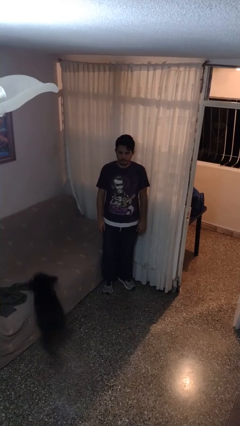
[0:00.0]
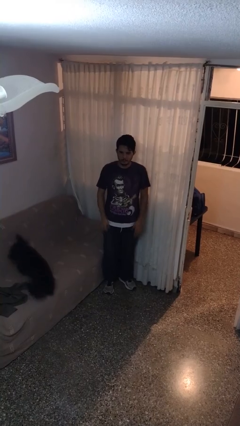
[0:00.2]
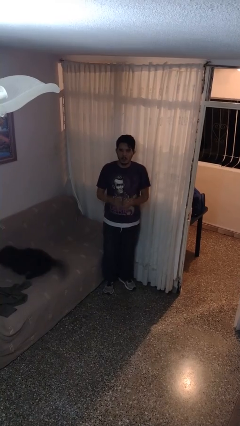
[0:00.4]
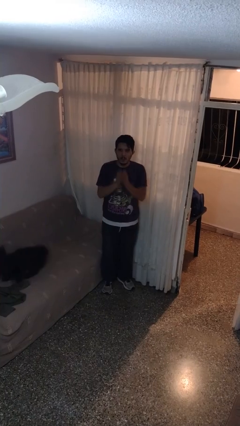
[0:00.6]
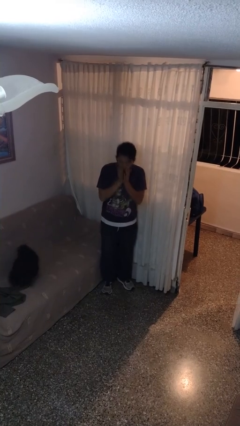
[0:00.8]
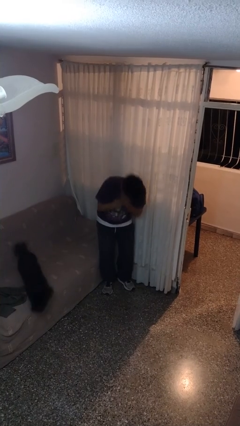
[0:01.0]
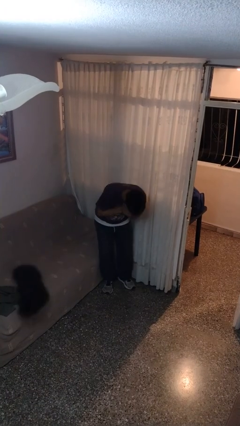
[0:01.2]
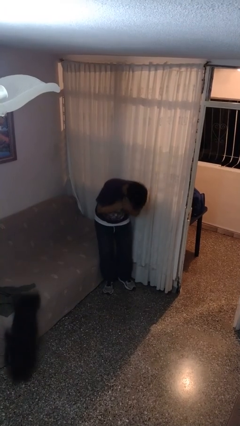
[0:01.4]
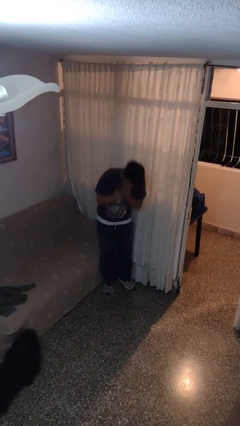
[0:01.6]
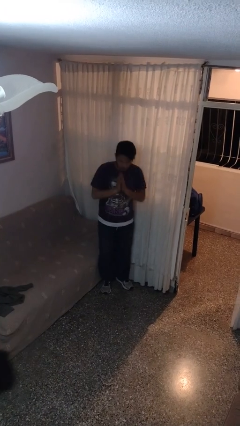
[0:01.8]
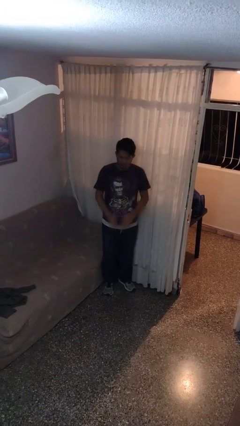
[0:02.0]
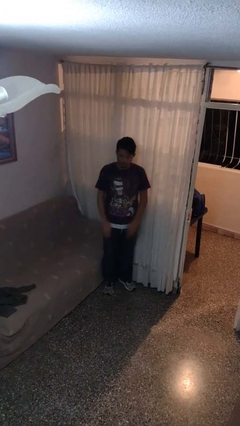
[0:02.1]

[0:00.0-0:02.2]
person sneezes into hand

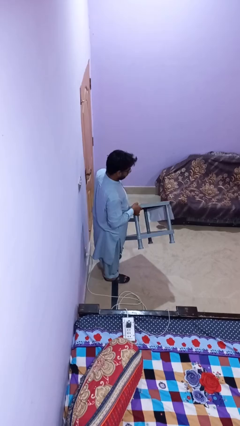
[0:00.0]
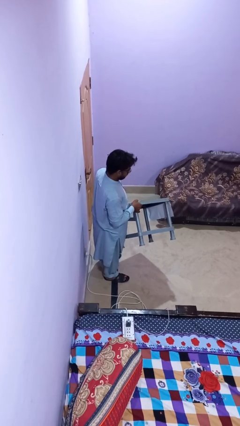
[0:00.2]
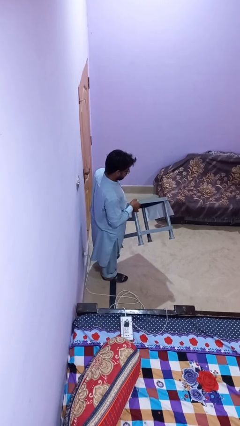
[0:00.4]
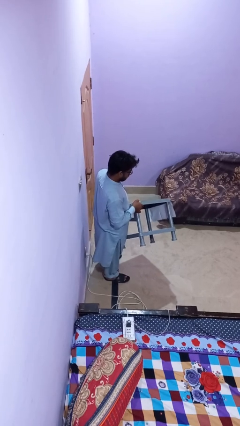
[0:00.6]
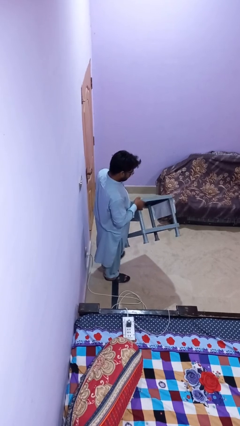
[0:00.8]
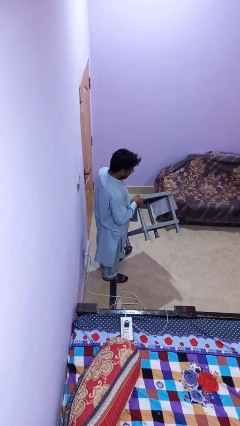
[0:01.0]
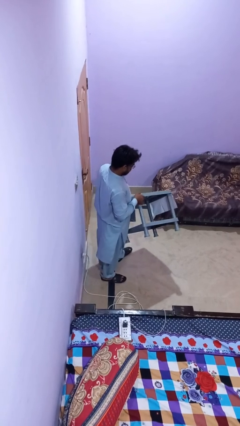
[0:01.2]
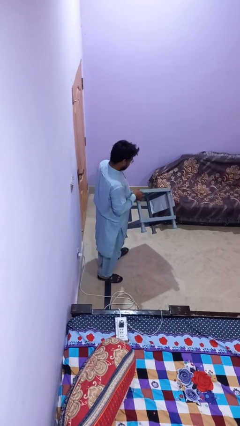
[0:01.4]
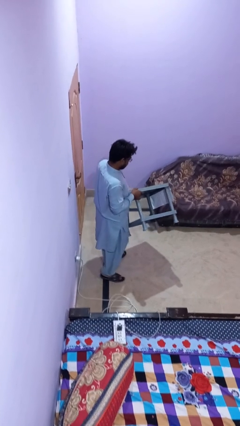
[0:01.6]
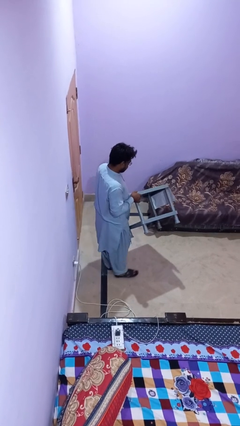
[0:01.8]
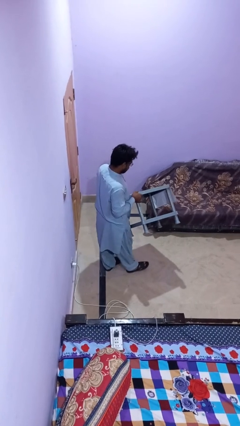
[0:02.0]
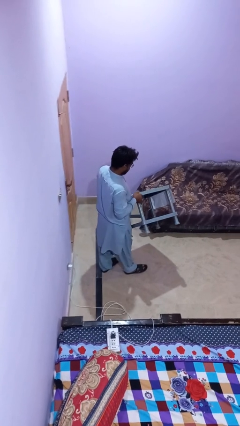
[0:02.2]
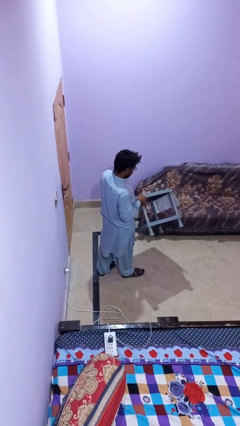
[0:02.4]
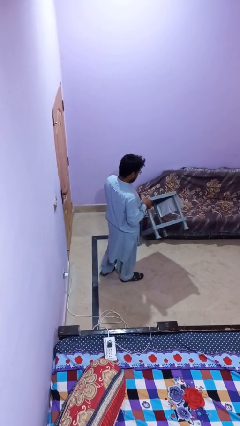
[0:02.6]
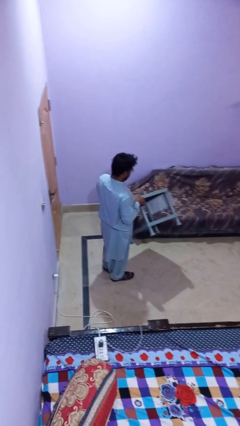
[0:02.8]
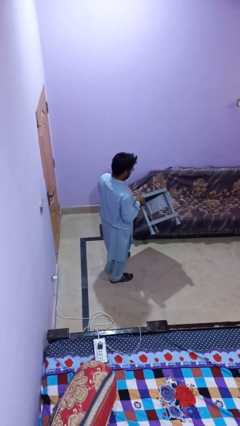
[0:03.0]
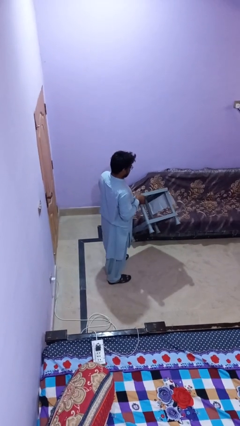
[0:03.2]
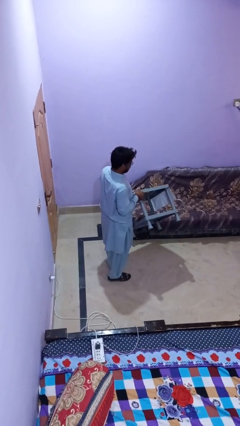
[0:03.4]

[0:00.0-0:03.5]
person carries furniture

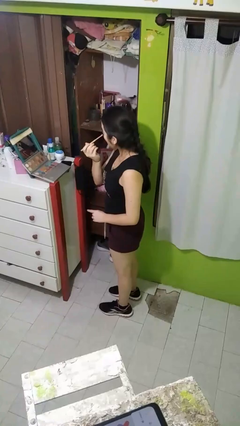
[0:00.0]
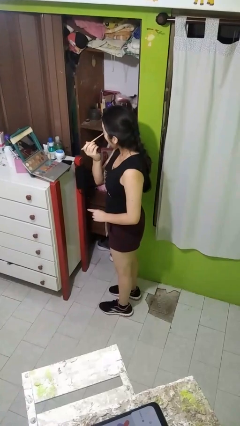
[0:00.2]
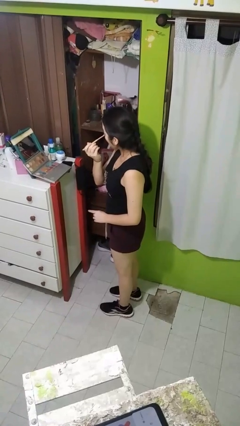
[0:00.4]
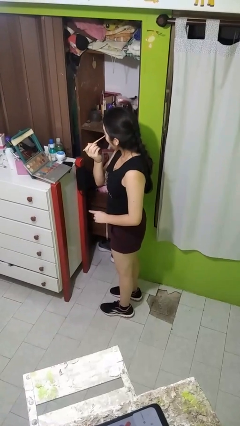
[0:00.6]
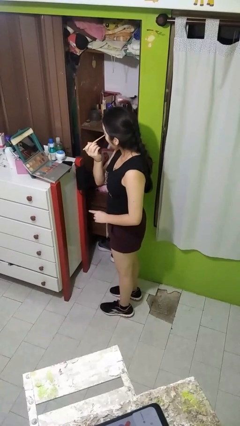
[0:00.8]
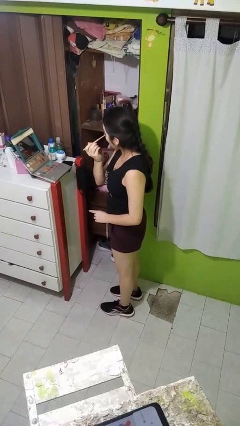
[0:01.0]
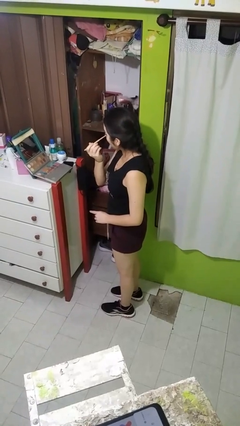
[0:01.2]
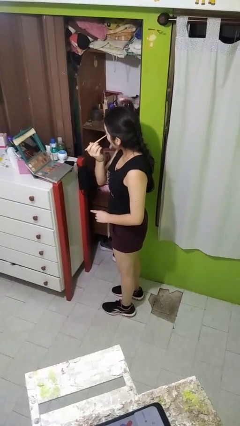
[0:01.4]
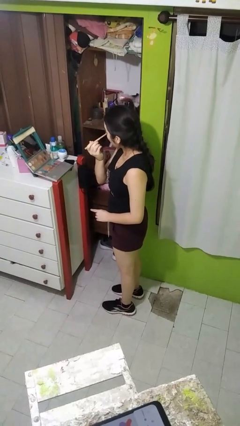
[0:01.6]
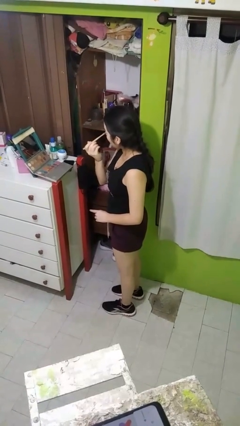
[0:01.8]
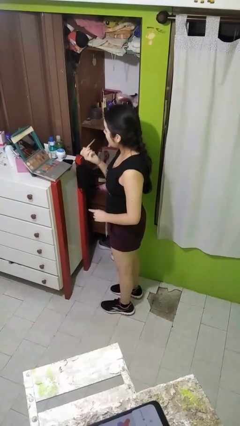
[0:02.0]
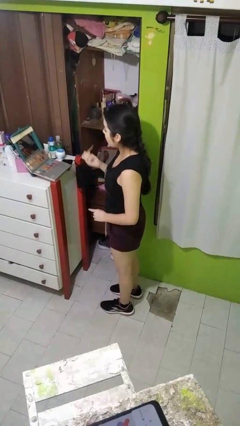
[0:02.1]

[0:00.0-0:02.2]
person applies eye makeup

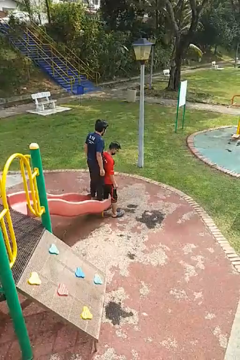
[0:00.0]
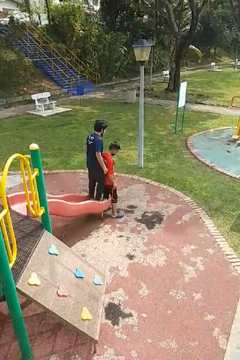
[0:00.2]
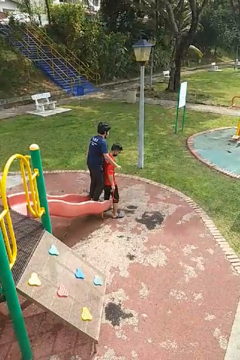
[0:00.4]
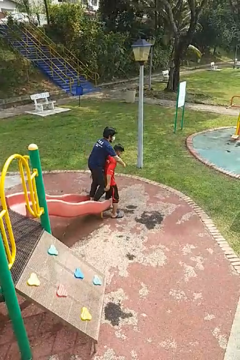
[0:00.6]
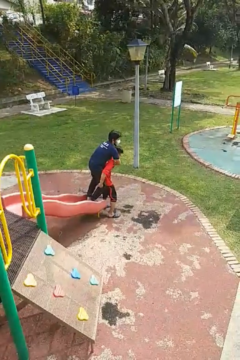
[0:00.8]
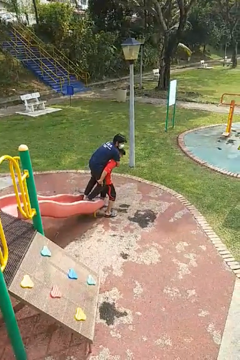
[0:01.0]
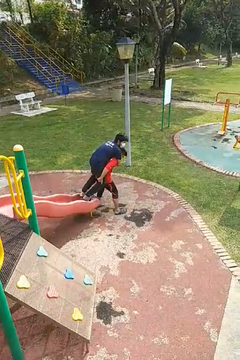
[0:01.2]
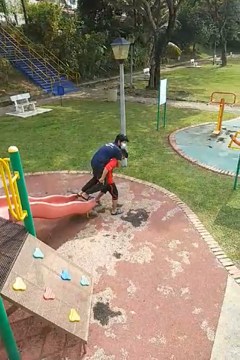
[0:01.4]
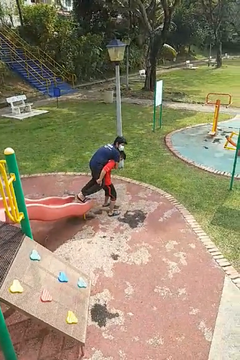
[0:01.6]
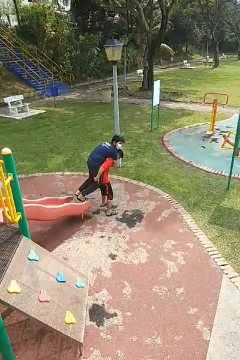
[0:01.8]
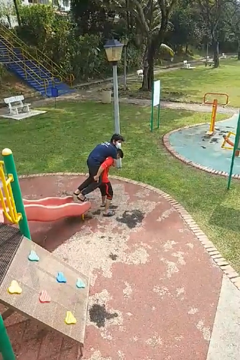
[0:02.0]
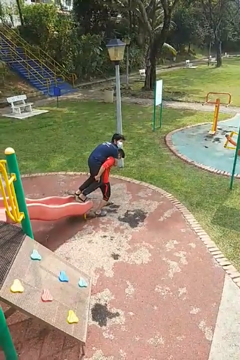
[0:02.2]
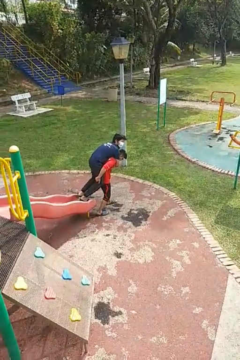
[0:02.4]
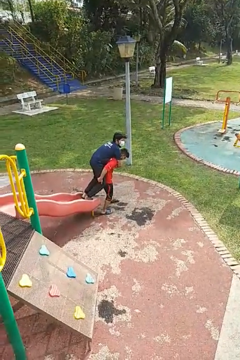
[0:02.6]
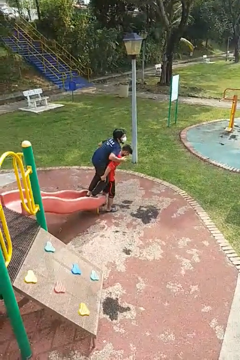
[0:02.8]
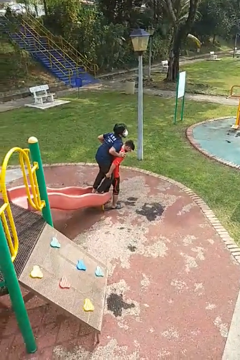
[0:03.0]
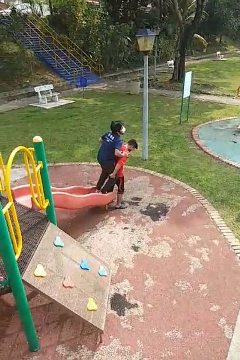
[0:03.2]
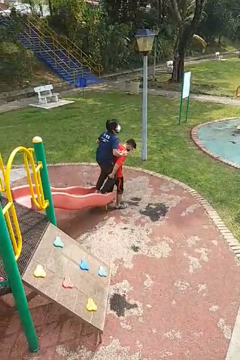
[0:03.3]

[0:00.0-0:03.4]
person carries person on back

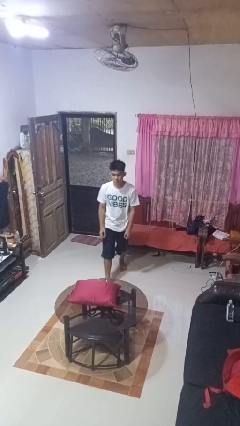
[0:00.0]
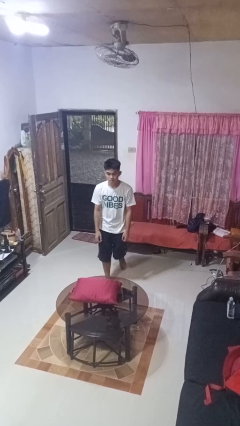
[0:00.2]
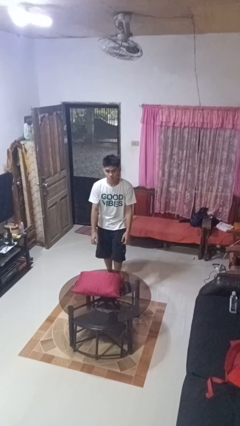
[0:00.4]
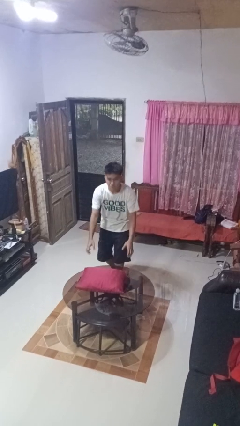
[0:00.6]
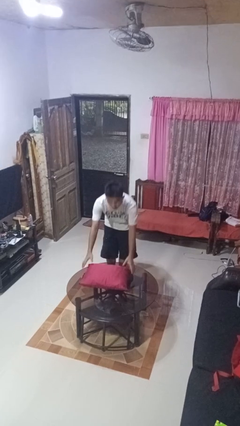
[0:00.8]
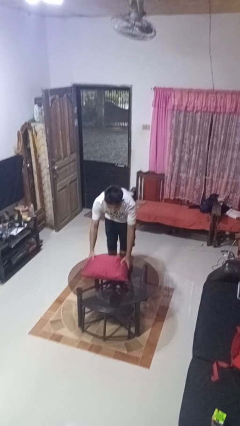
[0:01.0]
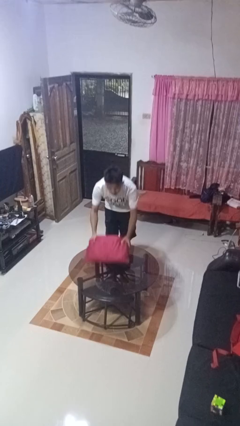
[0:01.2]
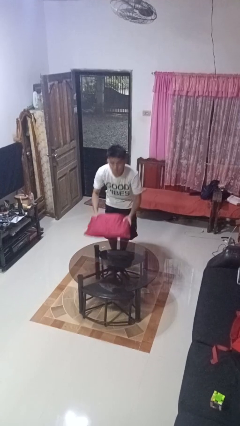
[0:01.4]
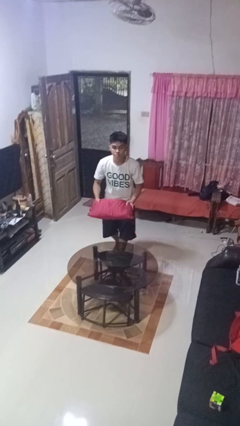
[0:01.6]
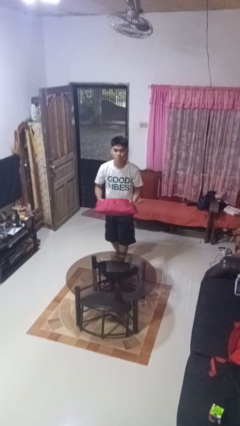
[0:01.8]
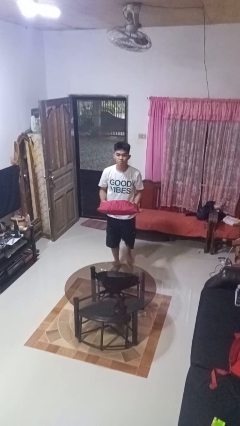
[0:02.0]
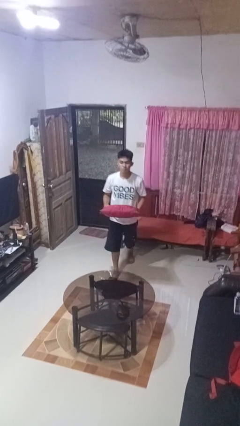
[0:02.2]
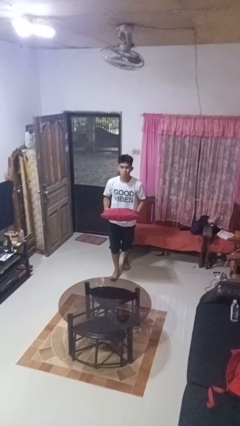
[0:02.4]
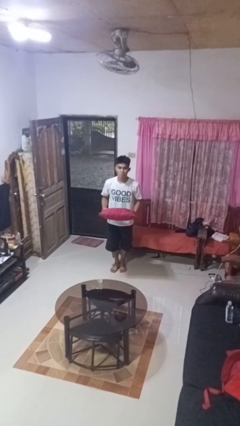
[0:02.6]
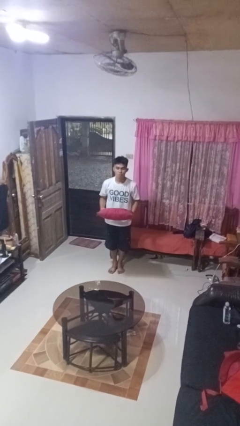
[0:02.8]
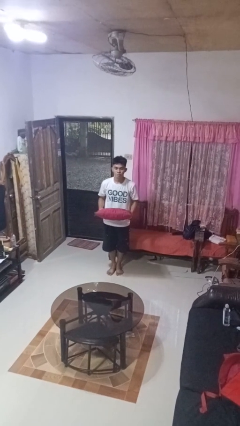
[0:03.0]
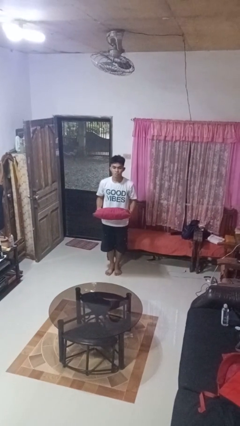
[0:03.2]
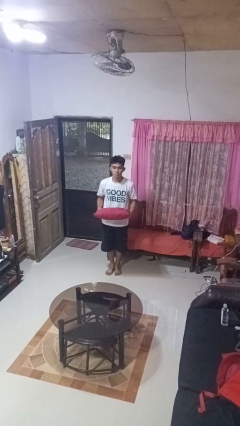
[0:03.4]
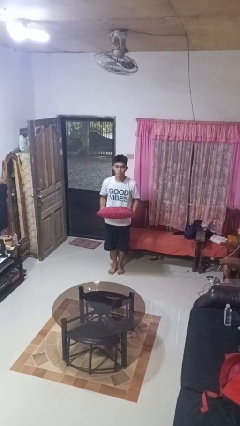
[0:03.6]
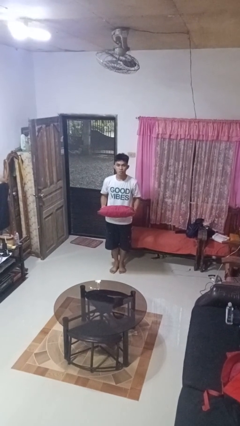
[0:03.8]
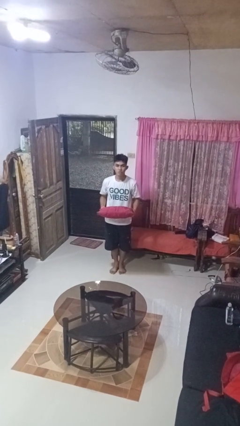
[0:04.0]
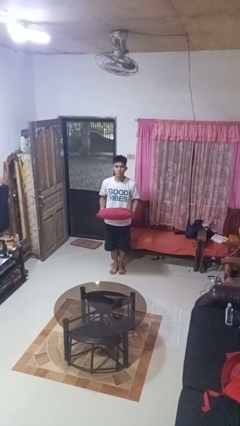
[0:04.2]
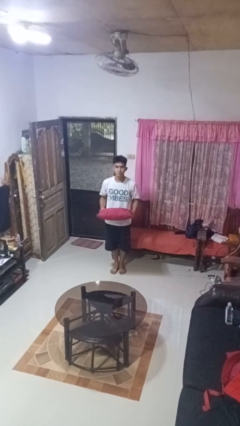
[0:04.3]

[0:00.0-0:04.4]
person picks up object from table

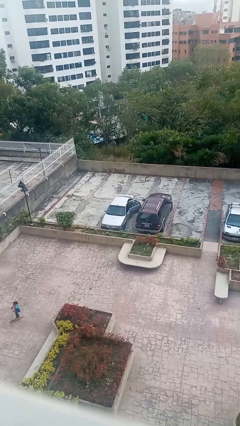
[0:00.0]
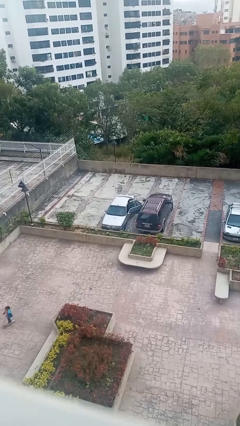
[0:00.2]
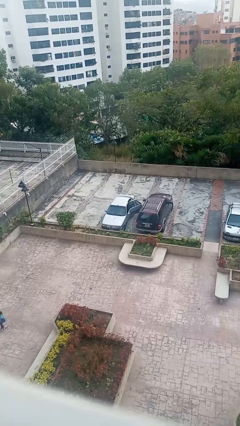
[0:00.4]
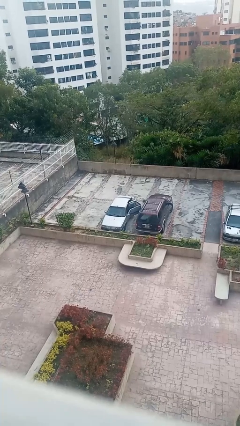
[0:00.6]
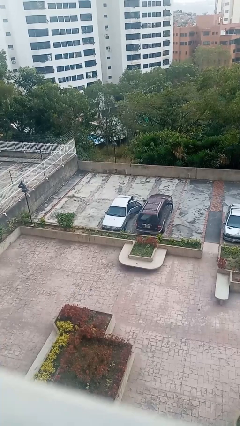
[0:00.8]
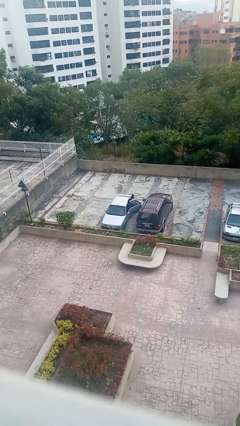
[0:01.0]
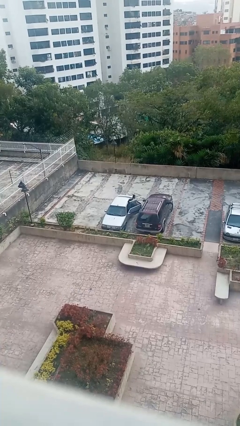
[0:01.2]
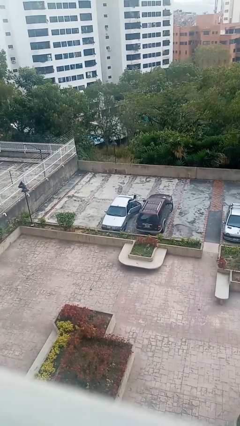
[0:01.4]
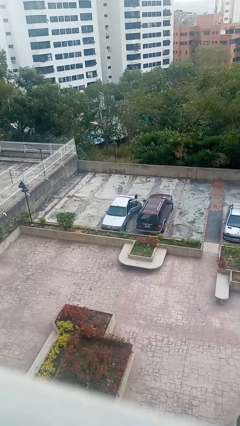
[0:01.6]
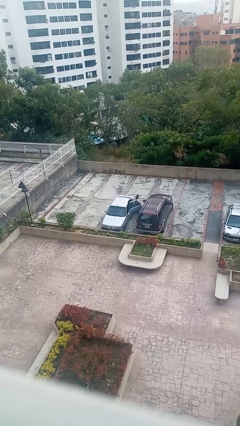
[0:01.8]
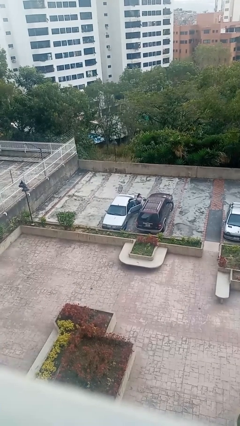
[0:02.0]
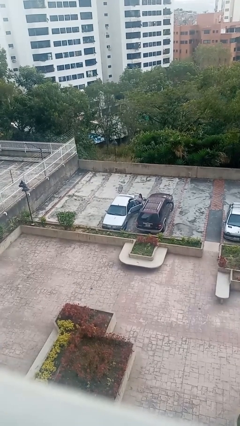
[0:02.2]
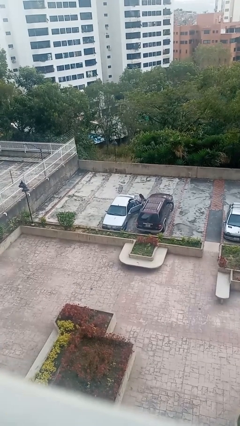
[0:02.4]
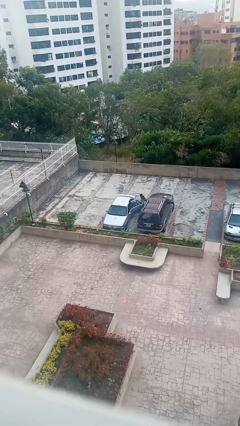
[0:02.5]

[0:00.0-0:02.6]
car drops off person
